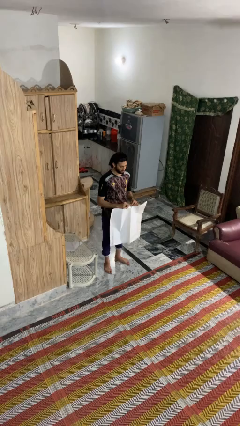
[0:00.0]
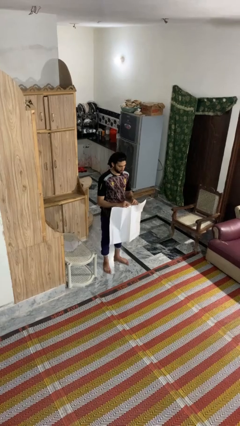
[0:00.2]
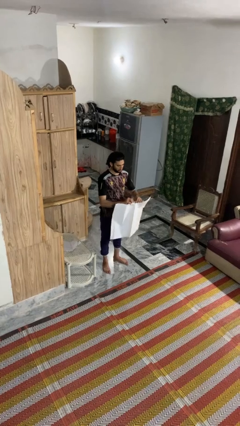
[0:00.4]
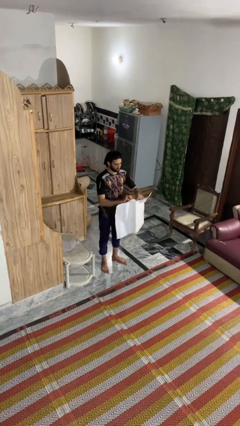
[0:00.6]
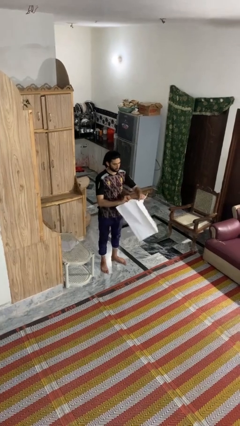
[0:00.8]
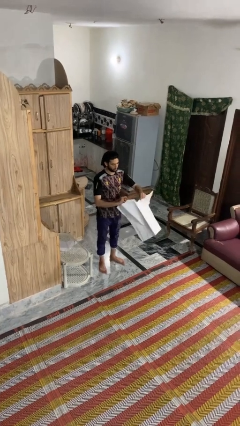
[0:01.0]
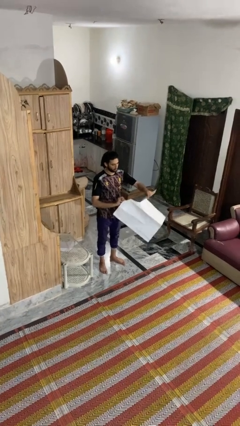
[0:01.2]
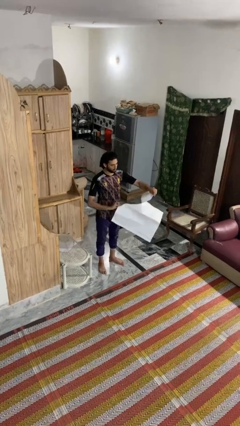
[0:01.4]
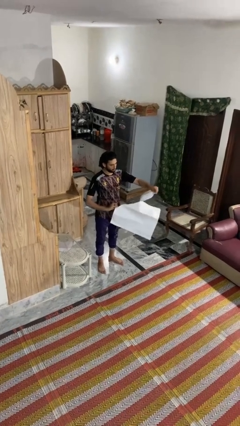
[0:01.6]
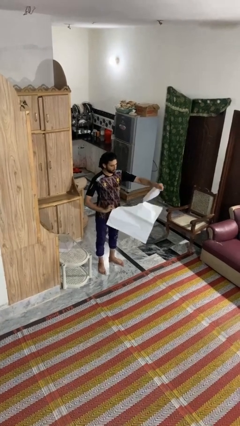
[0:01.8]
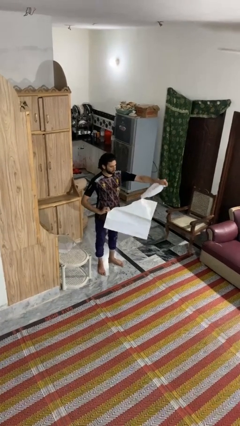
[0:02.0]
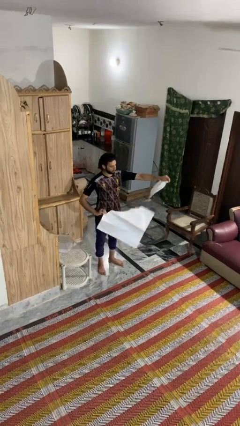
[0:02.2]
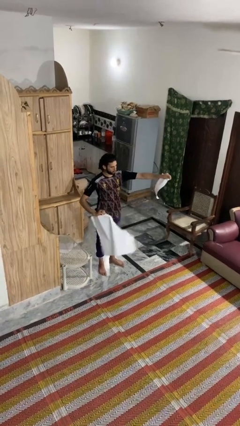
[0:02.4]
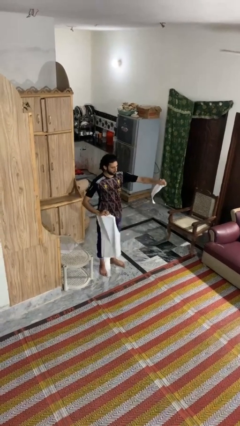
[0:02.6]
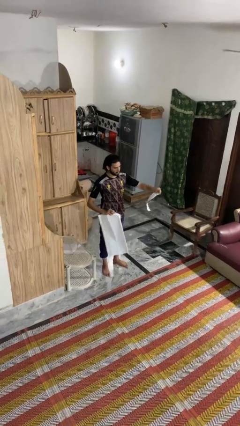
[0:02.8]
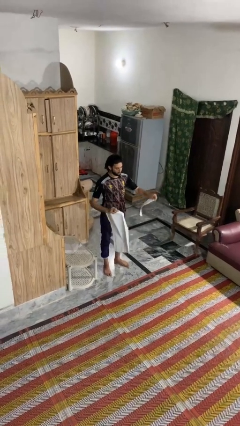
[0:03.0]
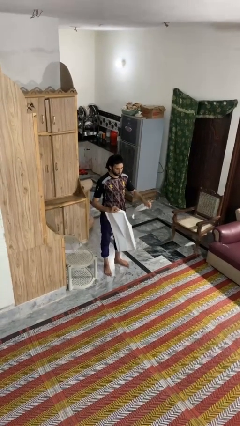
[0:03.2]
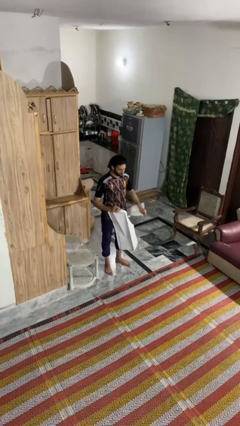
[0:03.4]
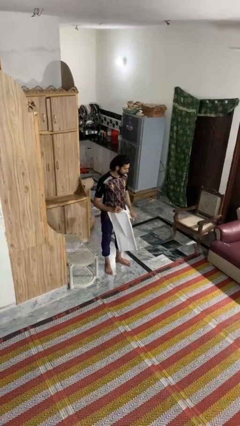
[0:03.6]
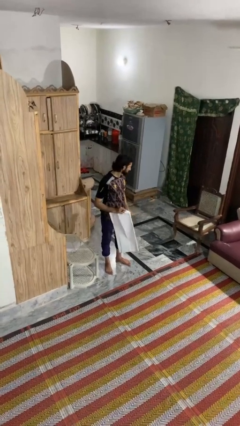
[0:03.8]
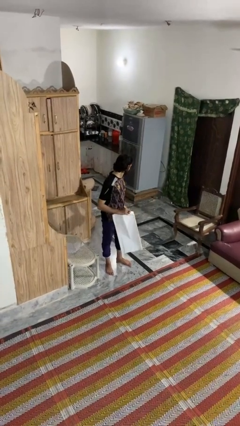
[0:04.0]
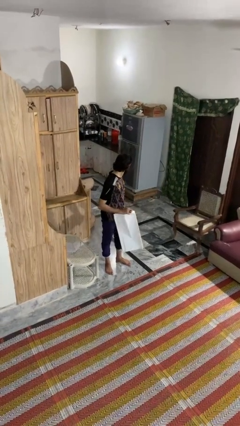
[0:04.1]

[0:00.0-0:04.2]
person tears paper

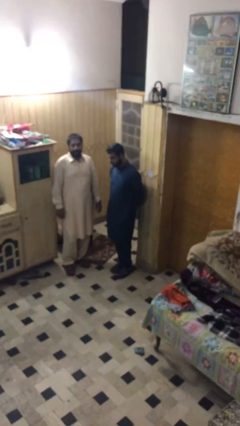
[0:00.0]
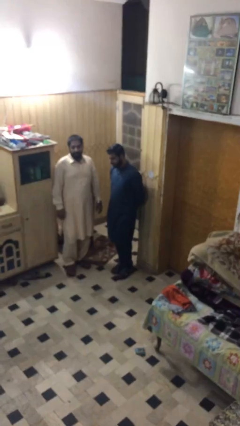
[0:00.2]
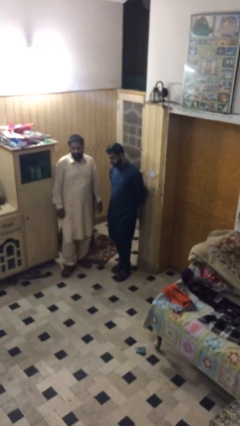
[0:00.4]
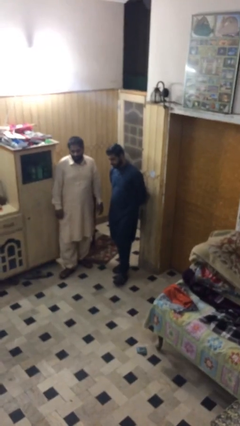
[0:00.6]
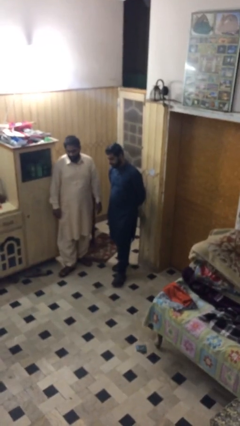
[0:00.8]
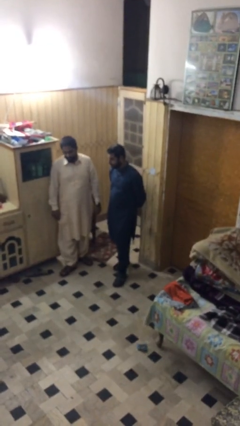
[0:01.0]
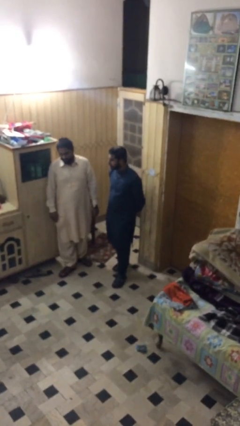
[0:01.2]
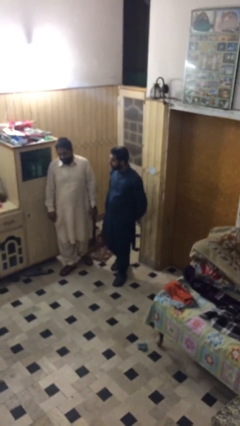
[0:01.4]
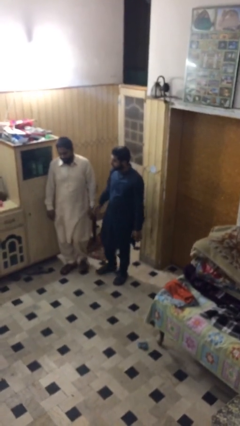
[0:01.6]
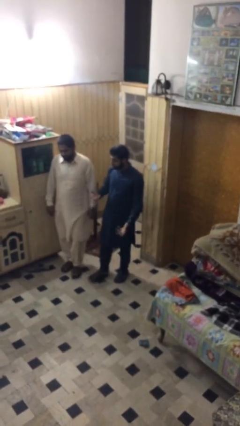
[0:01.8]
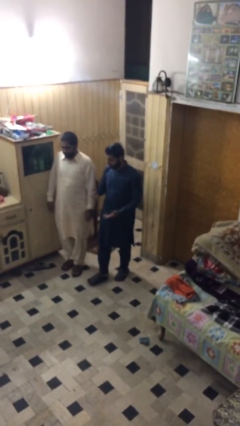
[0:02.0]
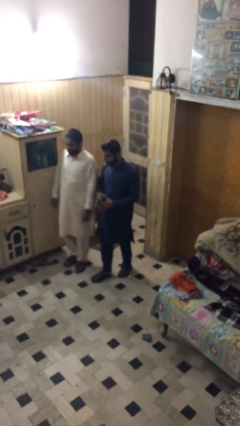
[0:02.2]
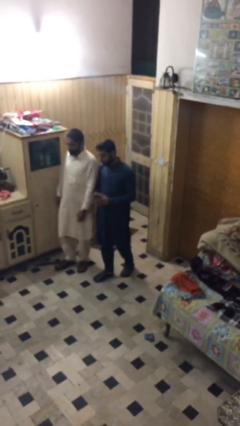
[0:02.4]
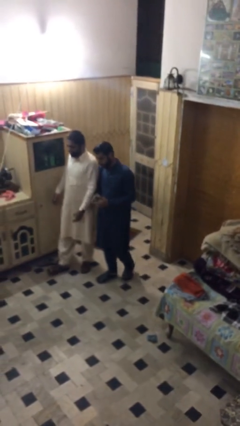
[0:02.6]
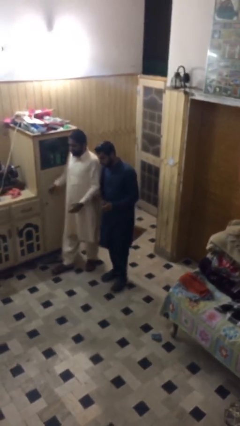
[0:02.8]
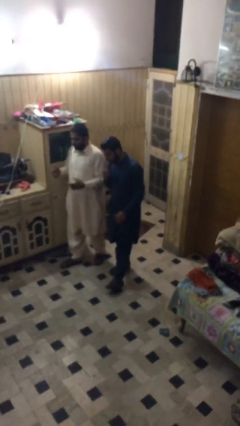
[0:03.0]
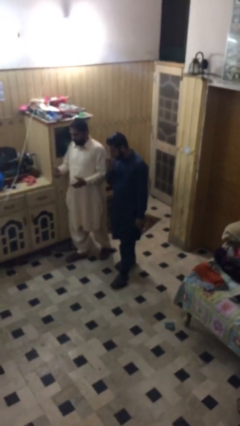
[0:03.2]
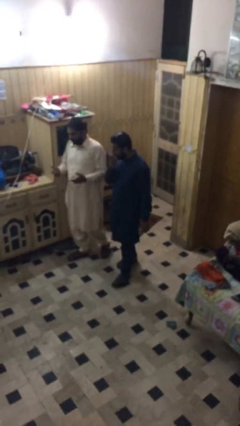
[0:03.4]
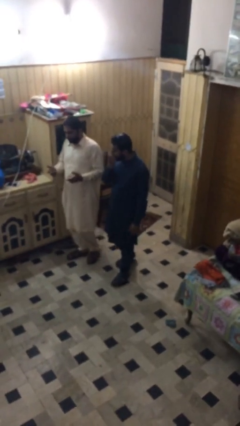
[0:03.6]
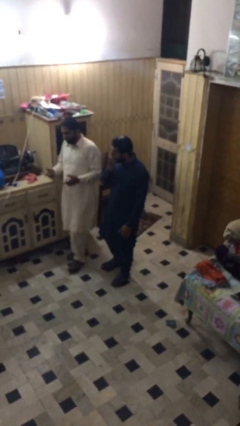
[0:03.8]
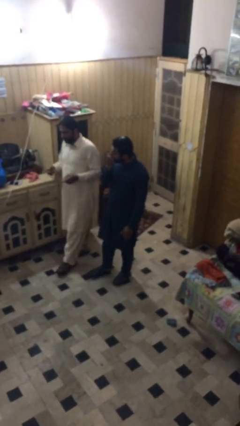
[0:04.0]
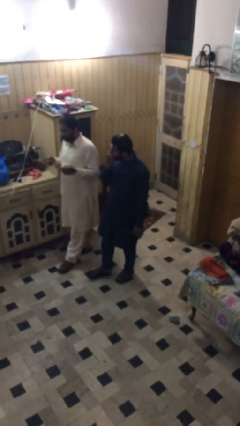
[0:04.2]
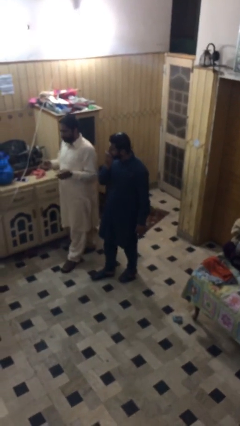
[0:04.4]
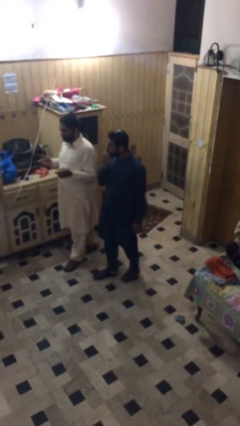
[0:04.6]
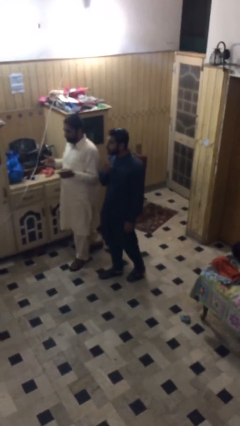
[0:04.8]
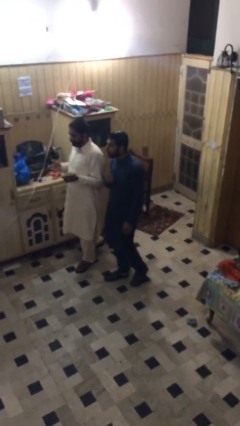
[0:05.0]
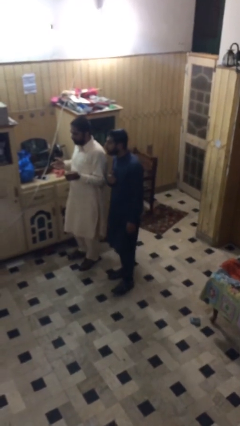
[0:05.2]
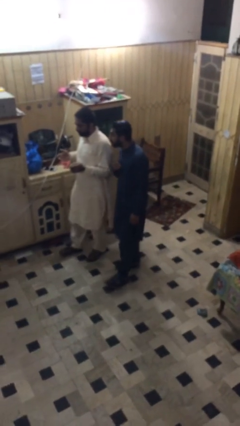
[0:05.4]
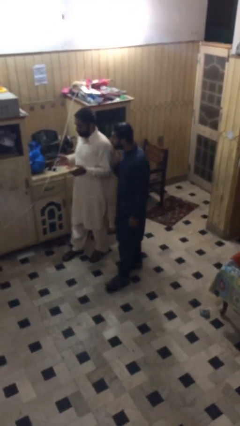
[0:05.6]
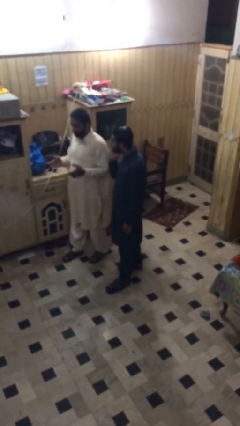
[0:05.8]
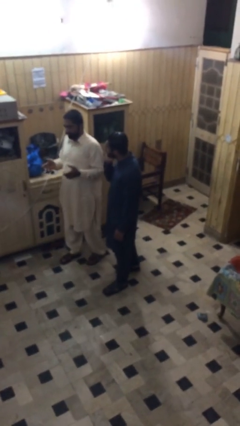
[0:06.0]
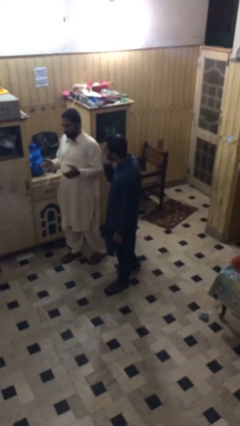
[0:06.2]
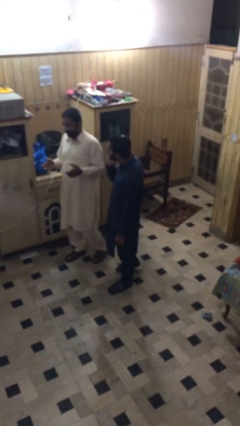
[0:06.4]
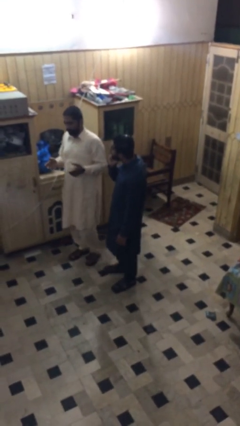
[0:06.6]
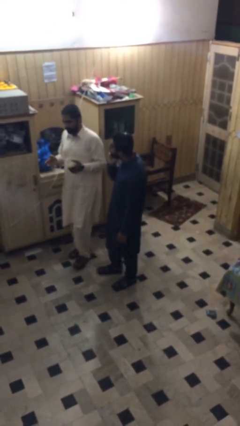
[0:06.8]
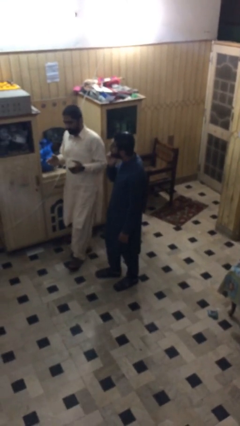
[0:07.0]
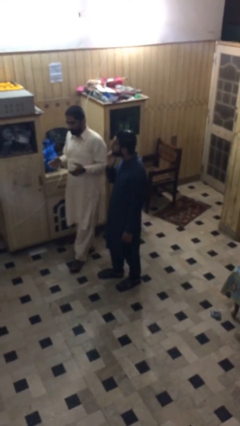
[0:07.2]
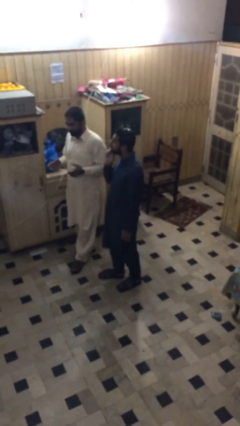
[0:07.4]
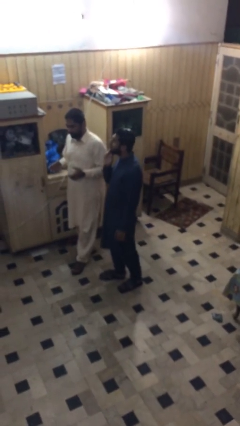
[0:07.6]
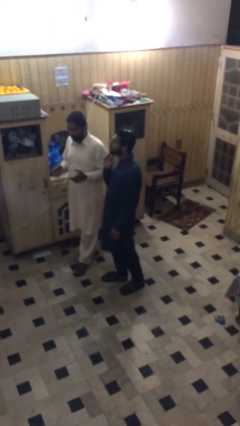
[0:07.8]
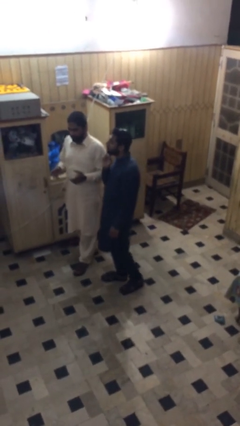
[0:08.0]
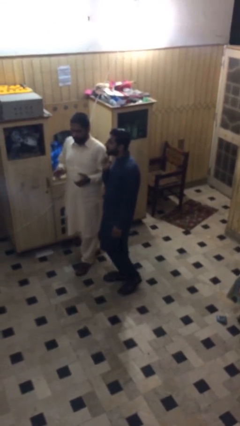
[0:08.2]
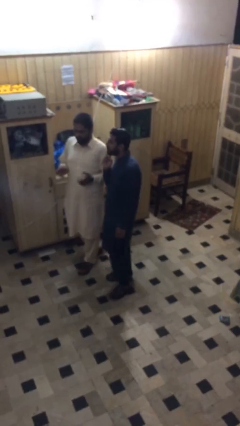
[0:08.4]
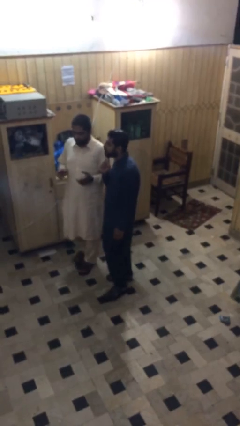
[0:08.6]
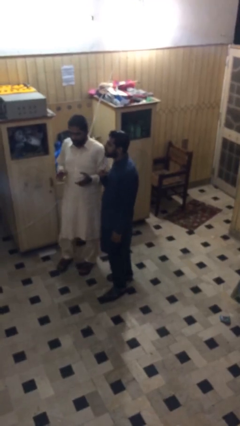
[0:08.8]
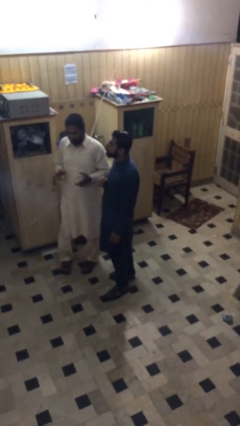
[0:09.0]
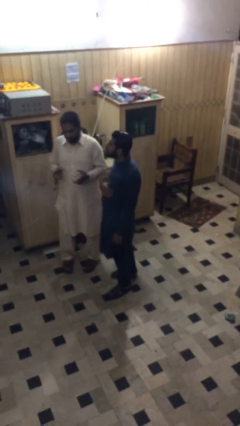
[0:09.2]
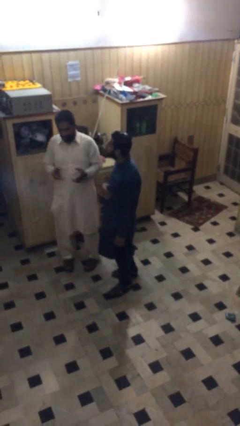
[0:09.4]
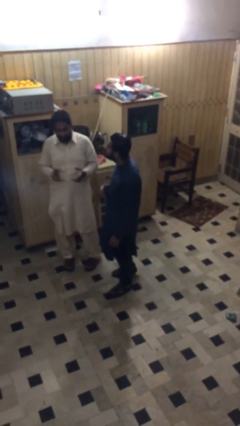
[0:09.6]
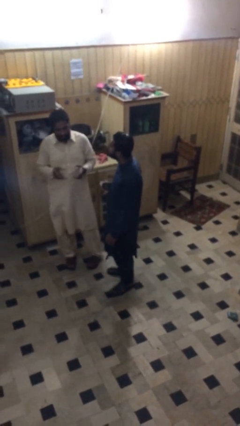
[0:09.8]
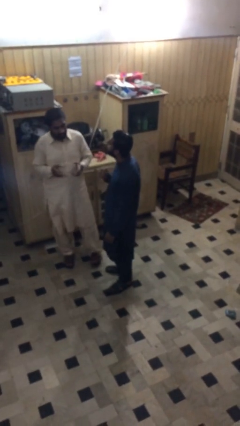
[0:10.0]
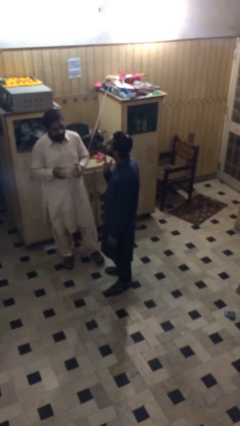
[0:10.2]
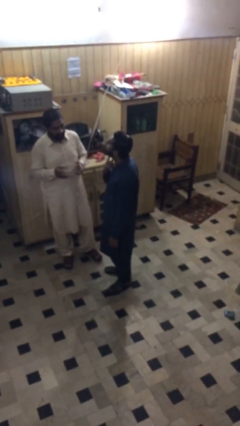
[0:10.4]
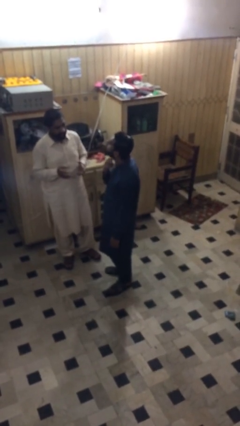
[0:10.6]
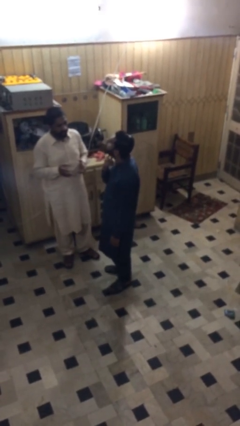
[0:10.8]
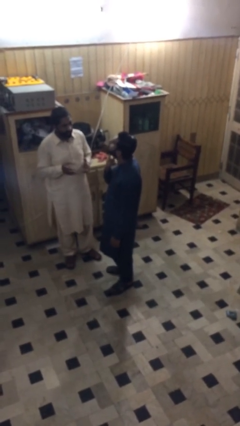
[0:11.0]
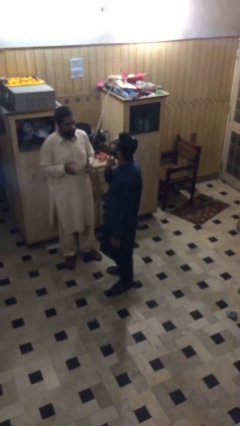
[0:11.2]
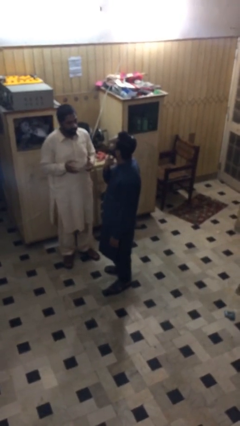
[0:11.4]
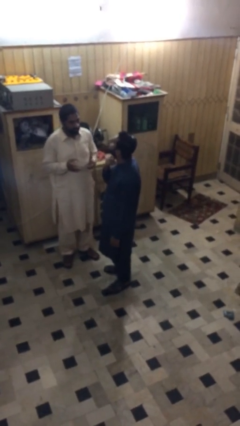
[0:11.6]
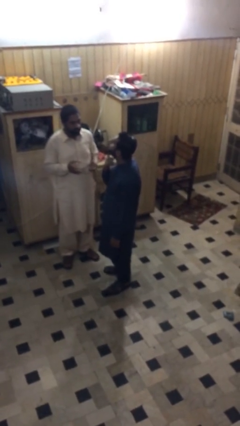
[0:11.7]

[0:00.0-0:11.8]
person talks to person

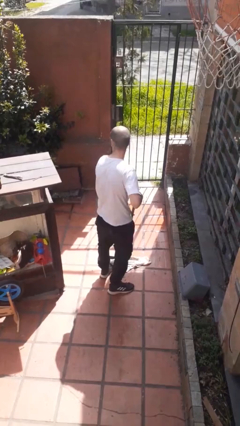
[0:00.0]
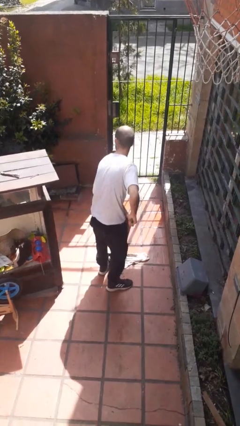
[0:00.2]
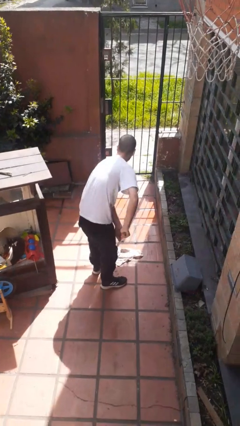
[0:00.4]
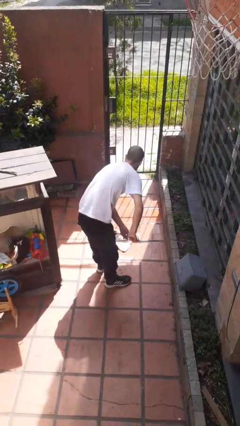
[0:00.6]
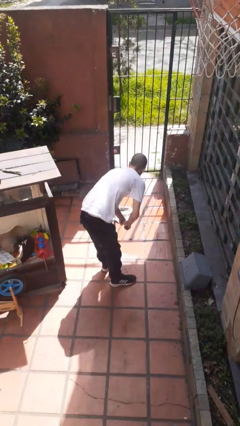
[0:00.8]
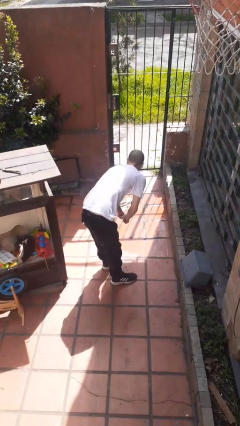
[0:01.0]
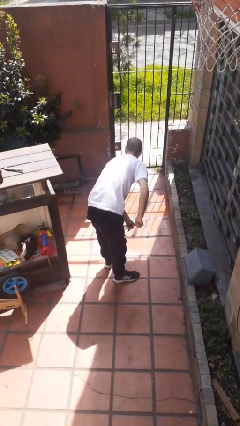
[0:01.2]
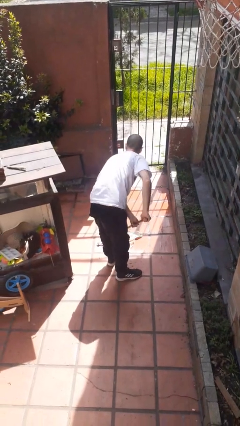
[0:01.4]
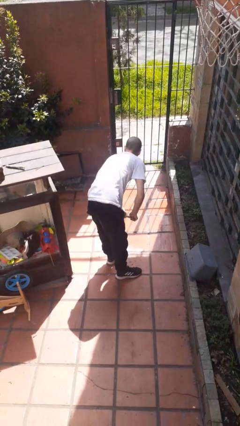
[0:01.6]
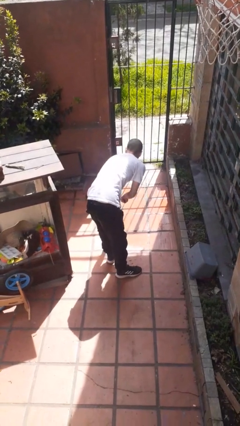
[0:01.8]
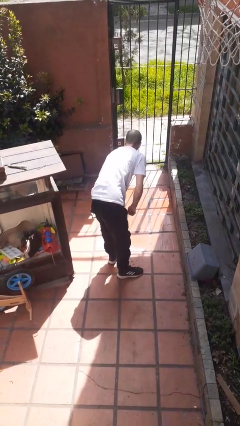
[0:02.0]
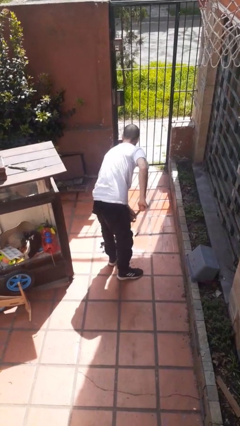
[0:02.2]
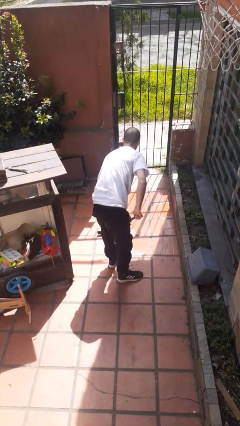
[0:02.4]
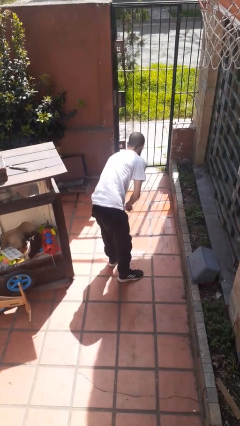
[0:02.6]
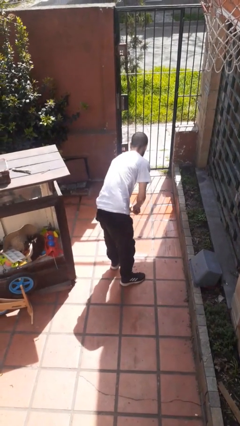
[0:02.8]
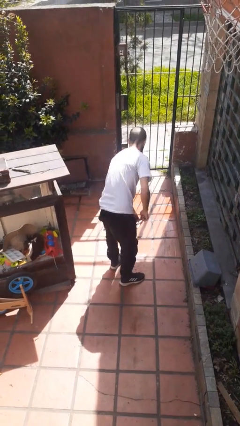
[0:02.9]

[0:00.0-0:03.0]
person mops
